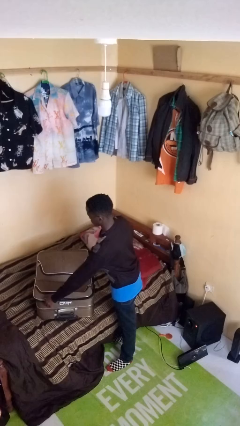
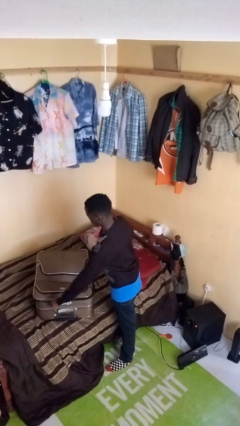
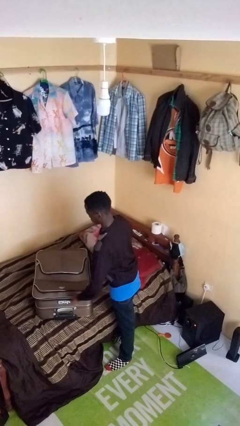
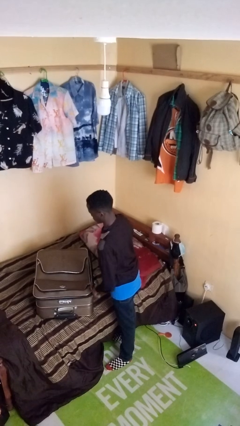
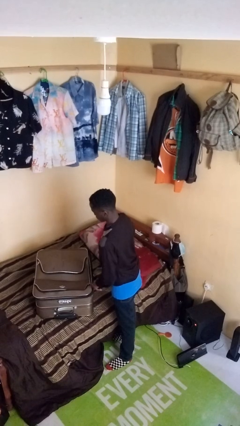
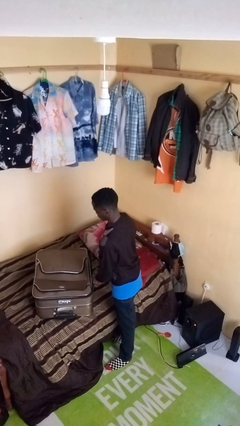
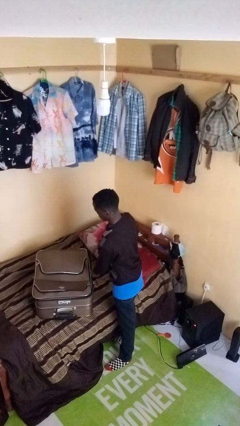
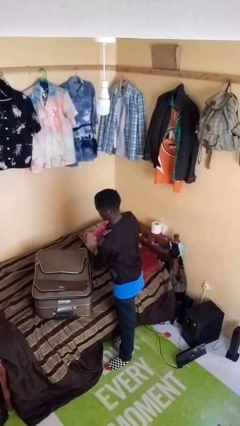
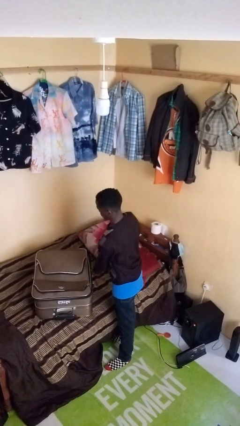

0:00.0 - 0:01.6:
person closes suitcase

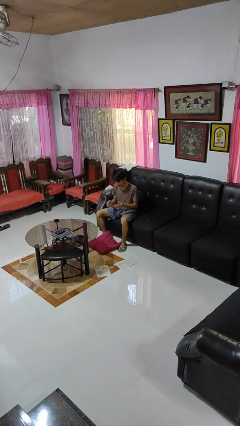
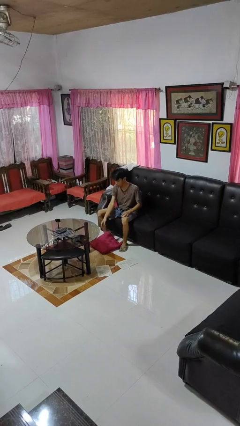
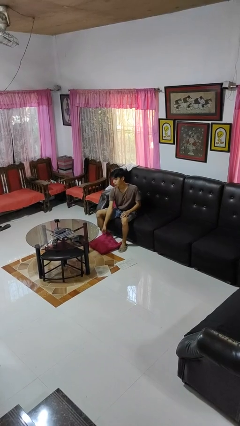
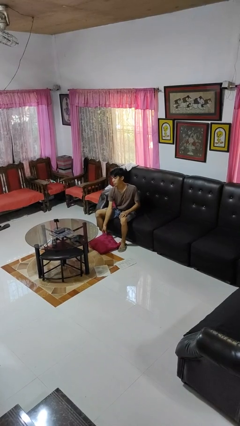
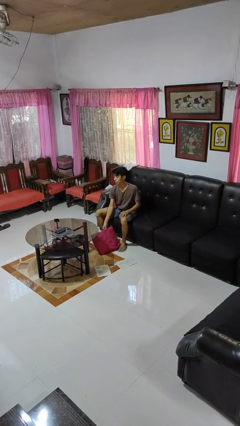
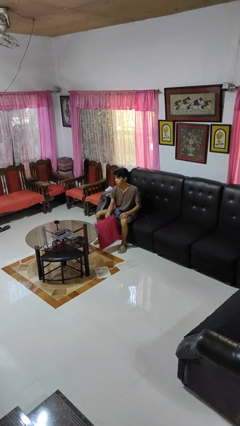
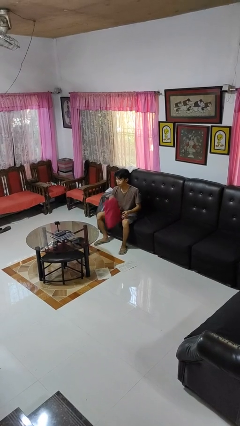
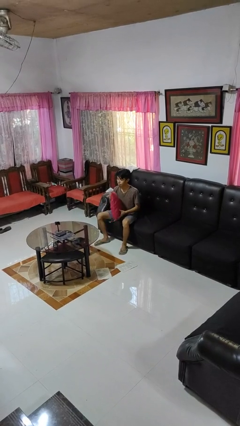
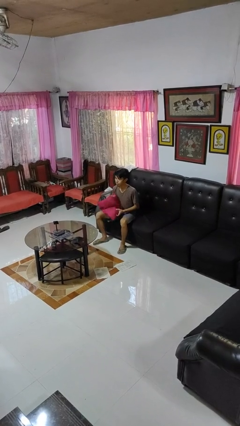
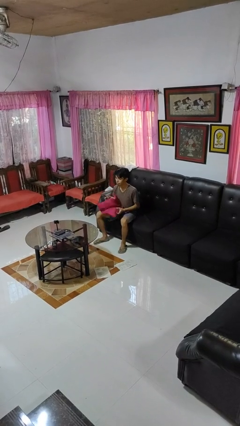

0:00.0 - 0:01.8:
person picks up object from floor

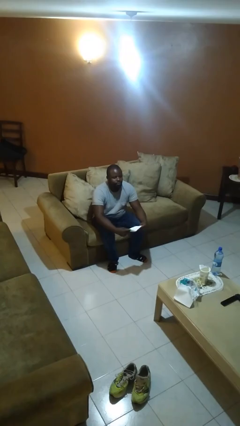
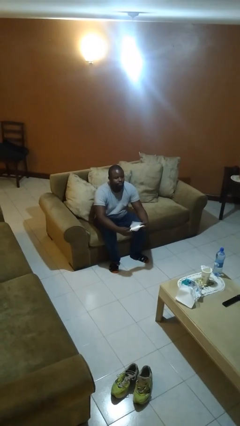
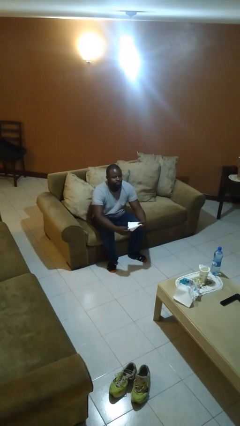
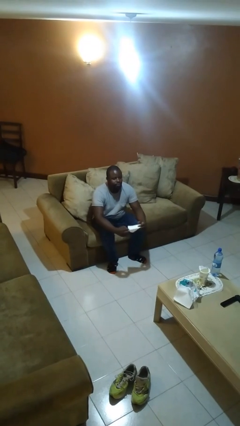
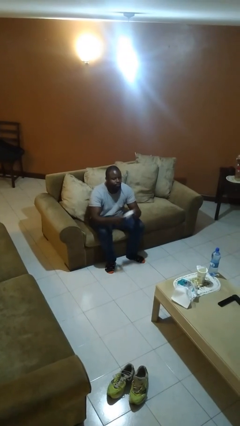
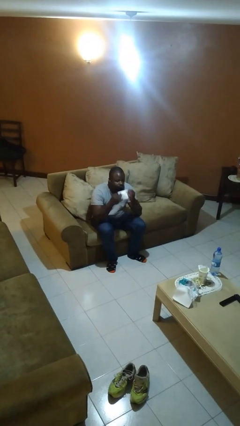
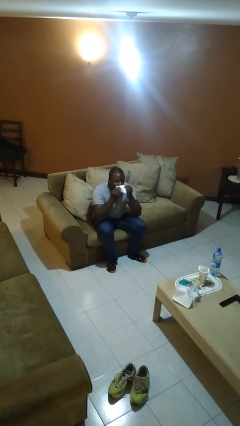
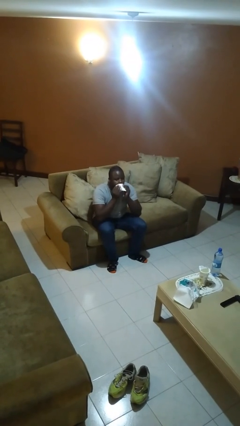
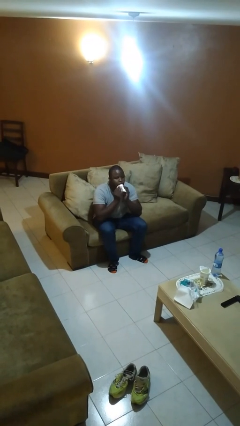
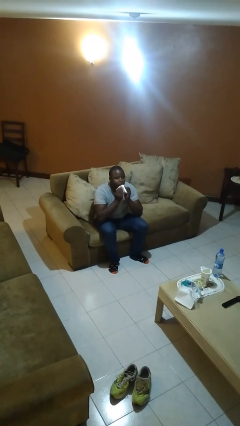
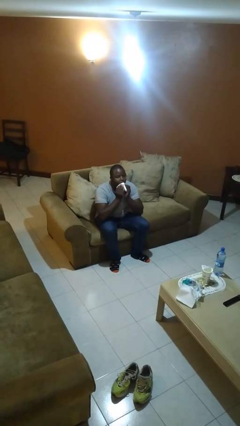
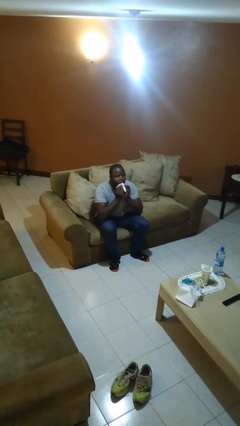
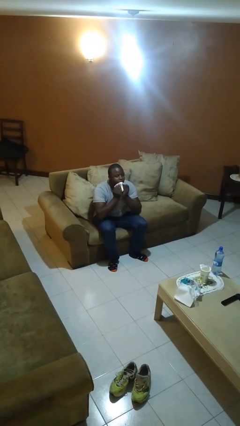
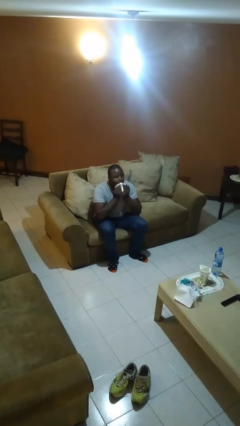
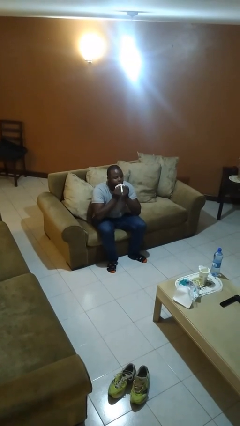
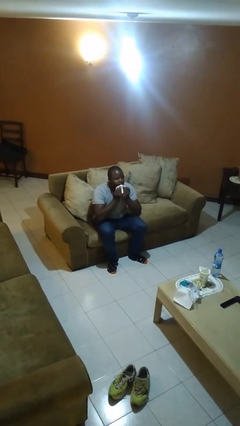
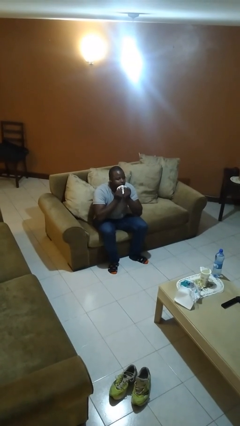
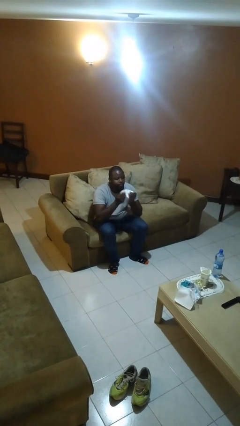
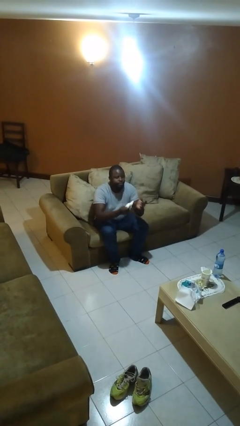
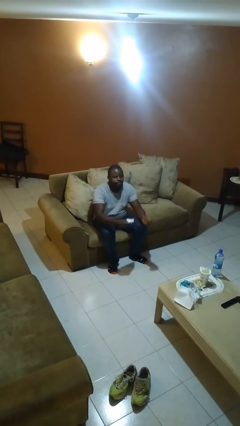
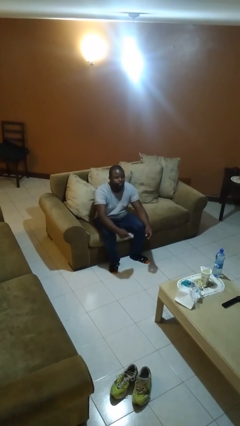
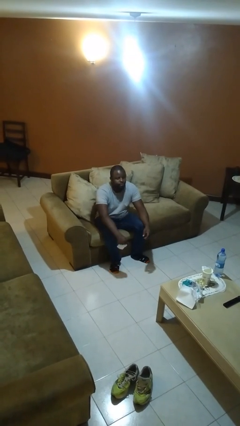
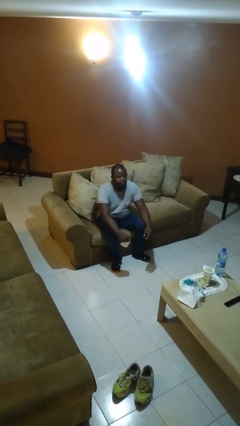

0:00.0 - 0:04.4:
person wipes mouth with napkin

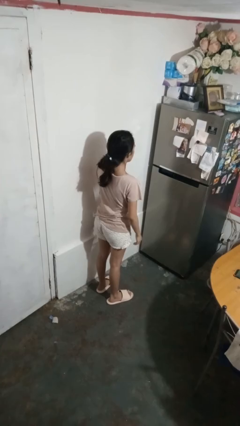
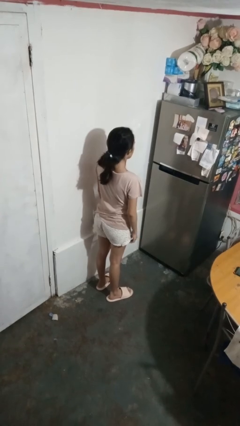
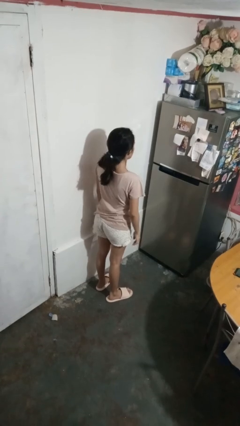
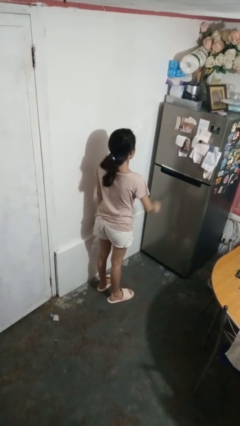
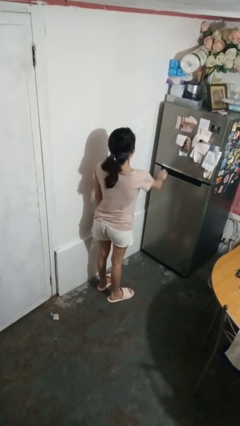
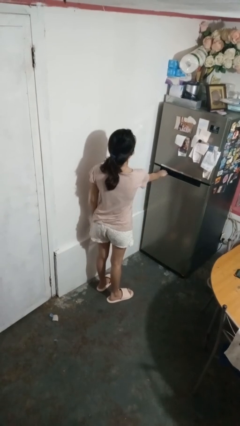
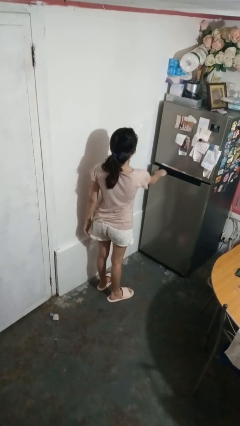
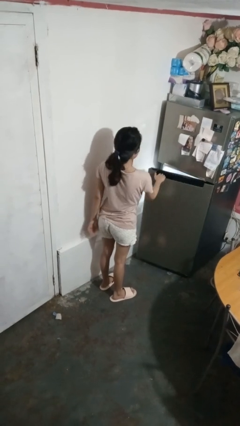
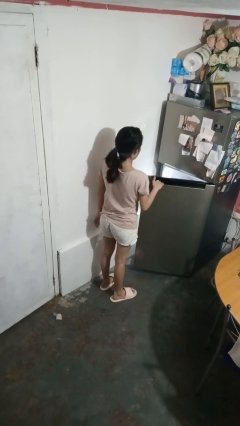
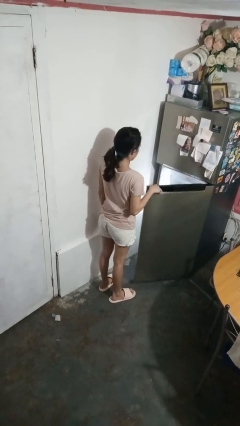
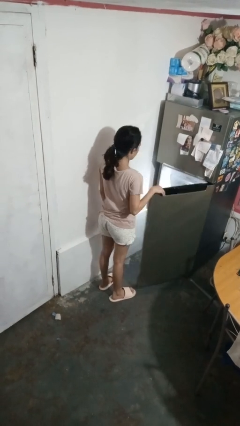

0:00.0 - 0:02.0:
person opens refrigerator

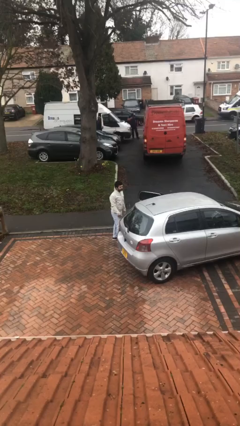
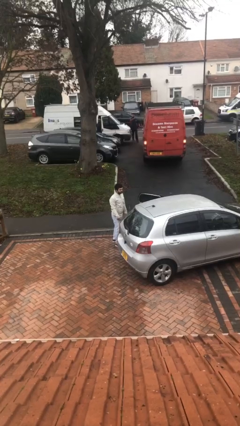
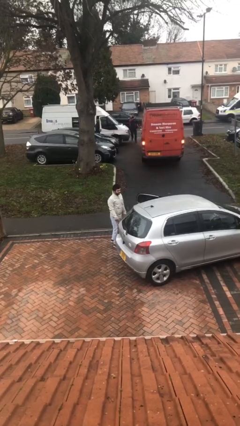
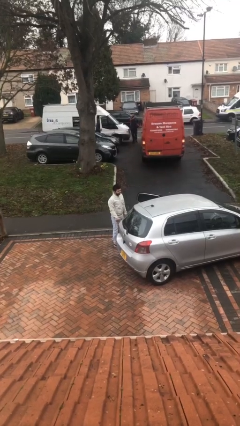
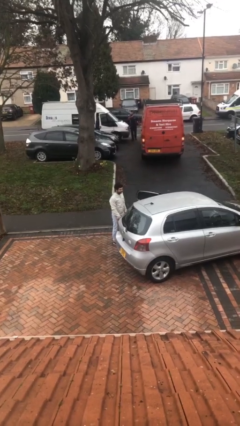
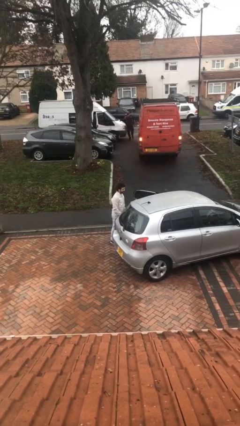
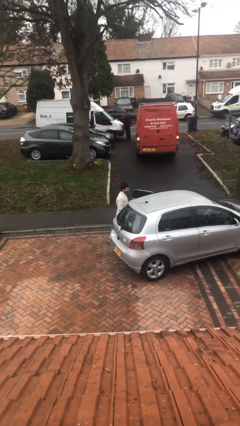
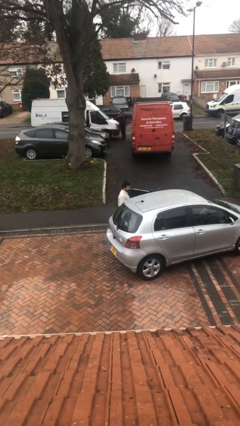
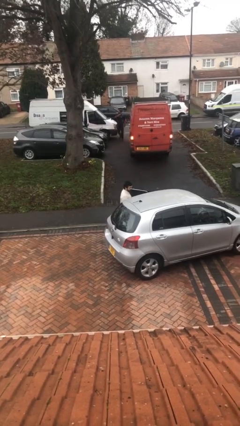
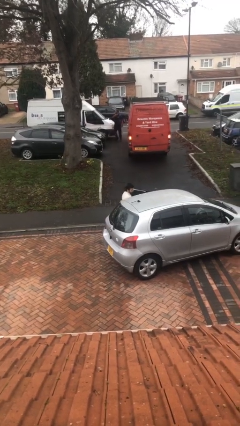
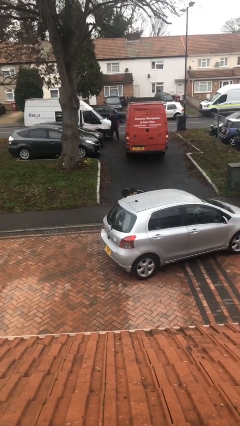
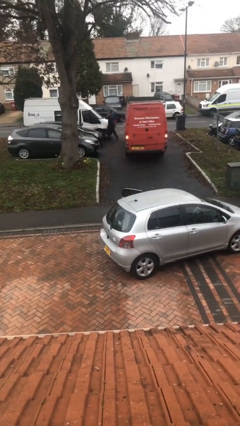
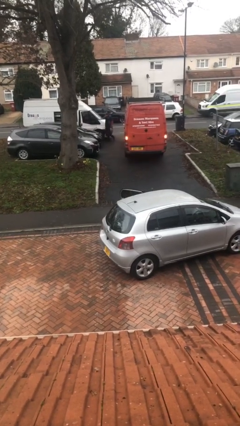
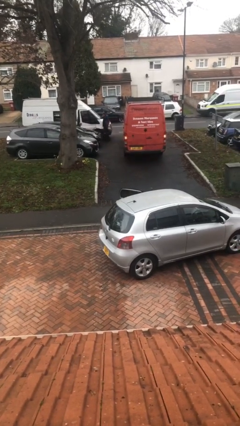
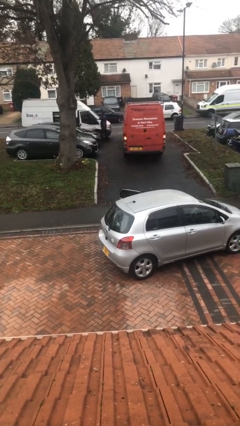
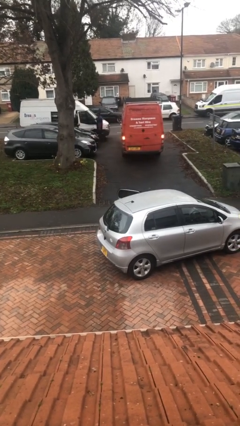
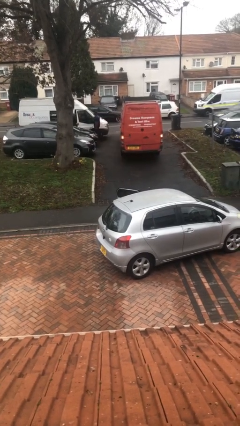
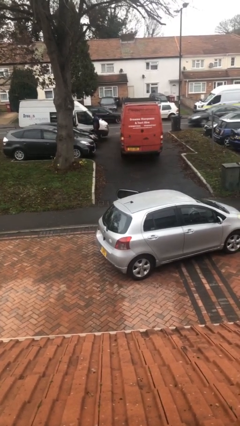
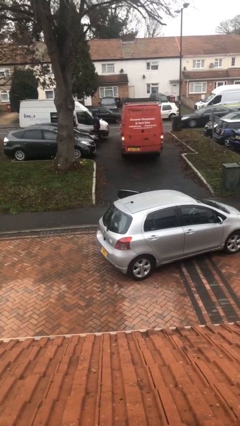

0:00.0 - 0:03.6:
person enters car

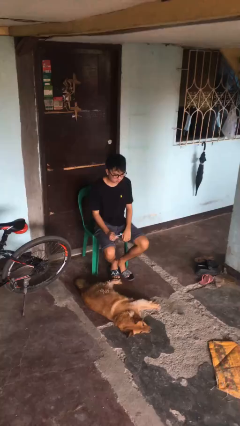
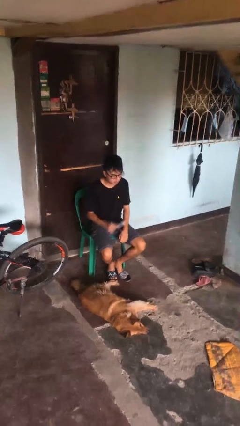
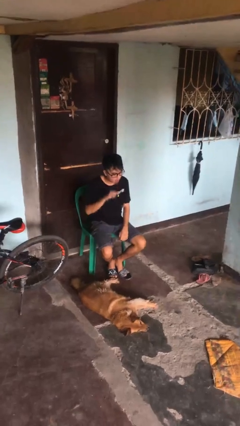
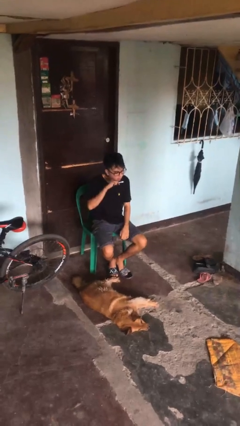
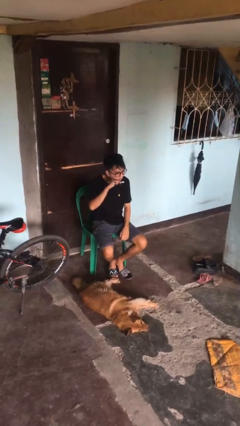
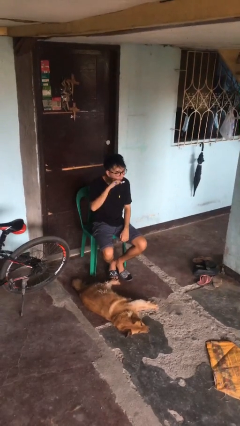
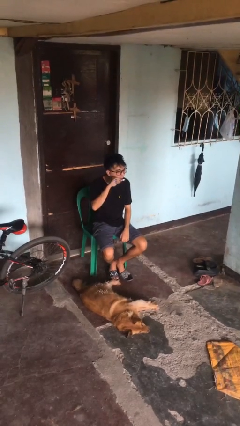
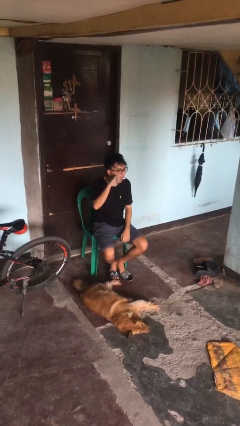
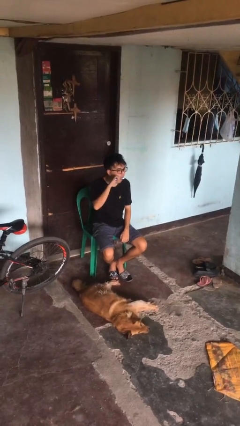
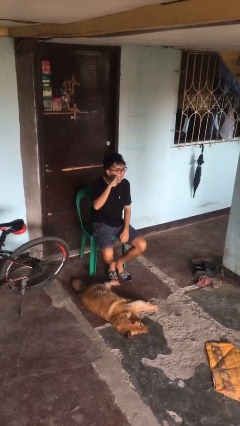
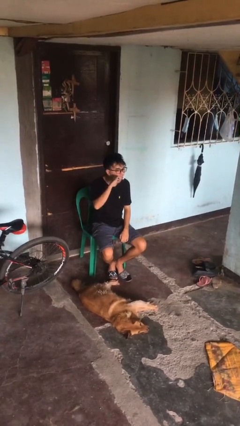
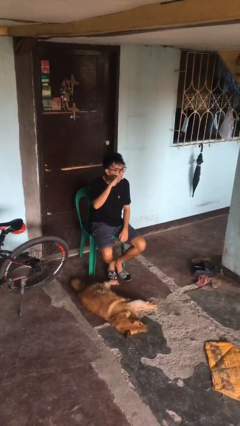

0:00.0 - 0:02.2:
person brushes teeth

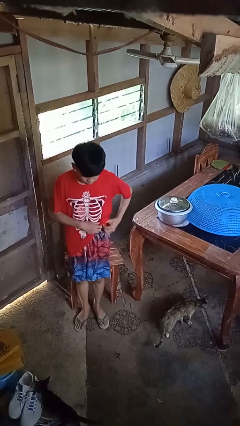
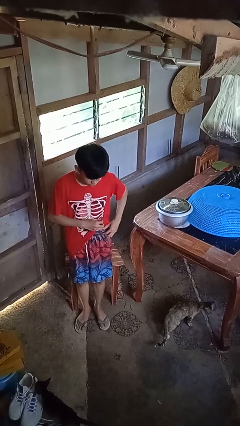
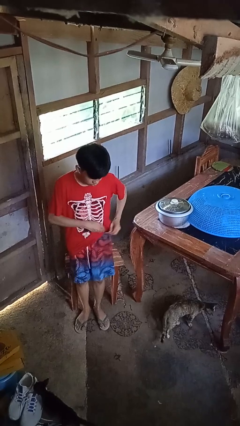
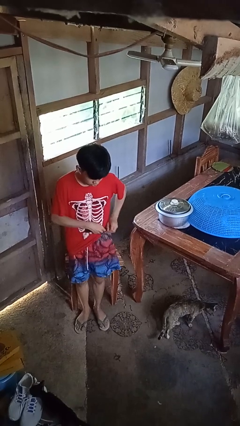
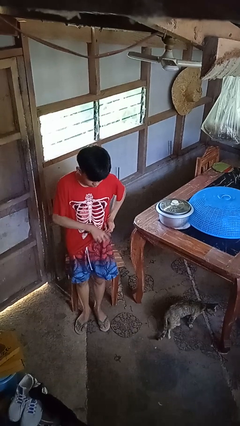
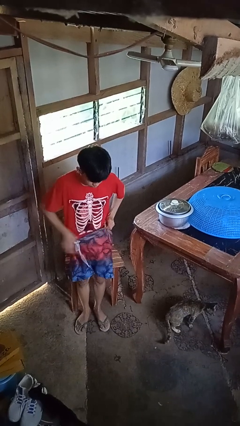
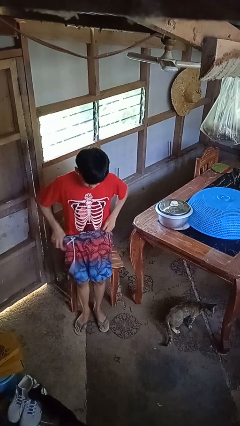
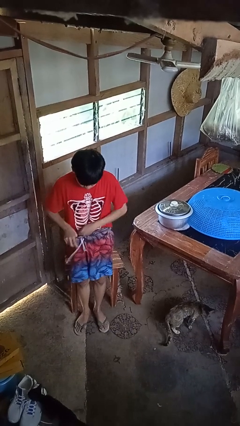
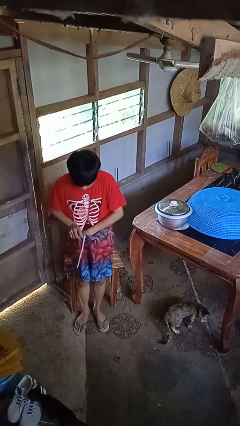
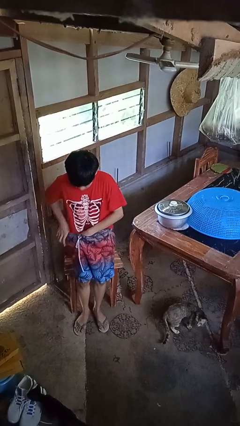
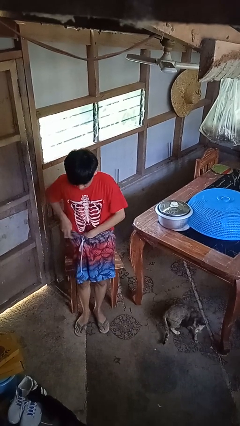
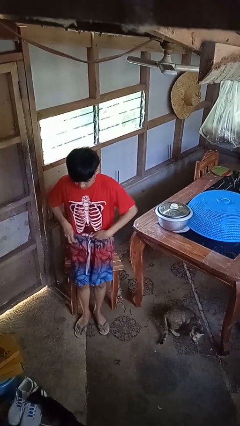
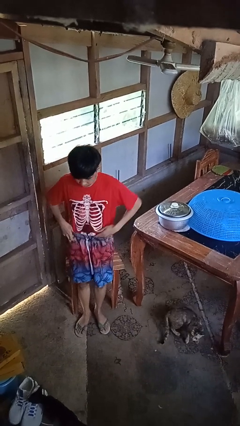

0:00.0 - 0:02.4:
person tucks in shirt
